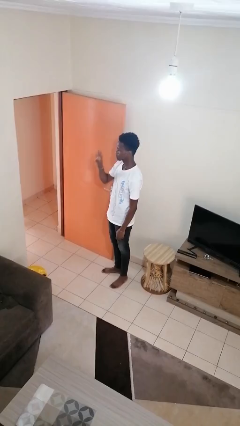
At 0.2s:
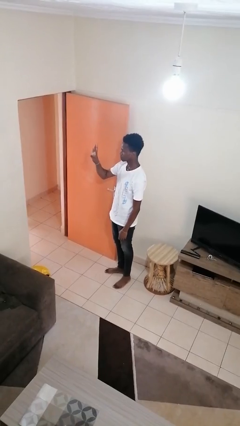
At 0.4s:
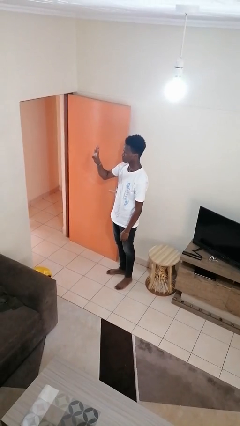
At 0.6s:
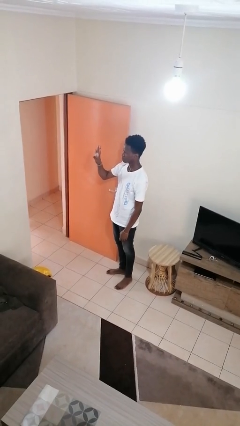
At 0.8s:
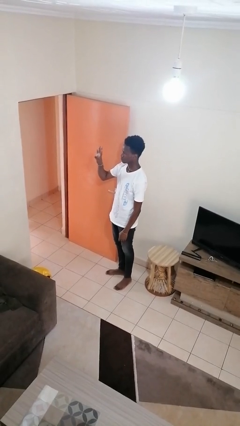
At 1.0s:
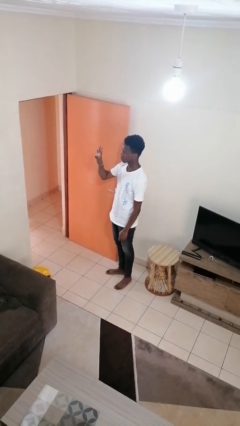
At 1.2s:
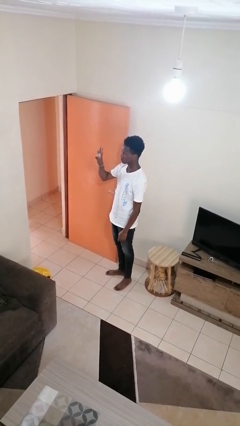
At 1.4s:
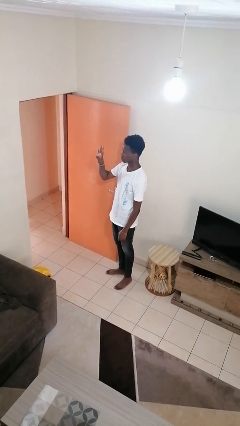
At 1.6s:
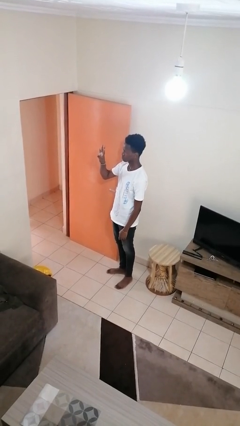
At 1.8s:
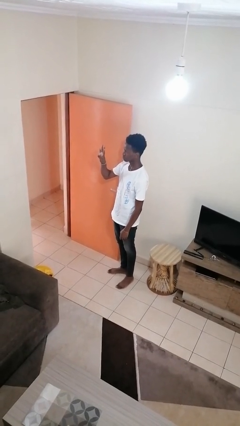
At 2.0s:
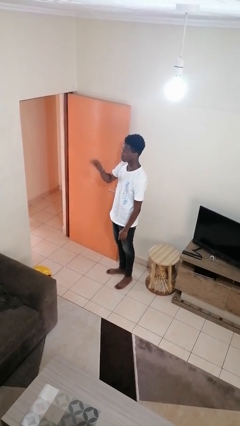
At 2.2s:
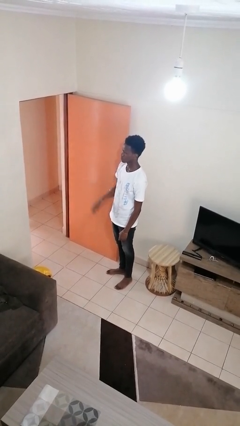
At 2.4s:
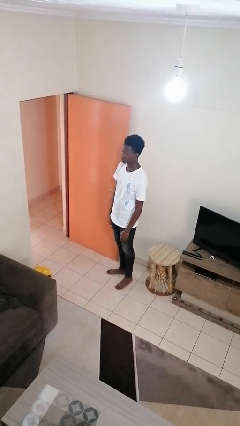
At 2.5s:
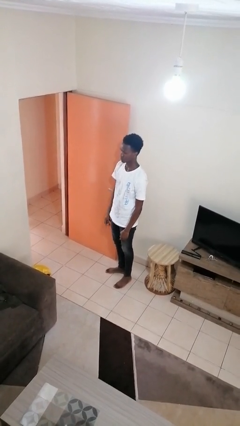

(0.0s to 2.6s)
person gestures number four

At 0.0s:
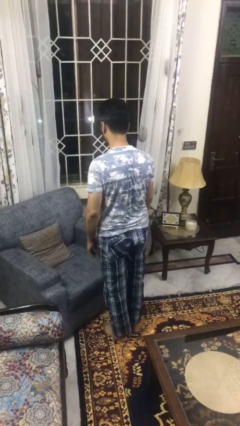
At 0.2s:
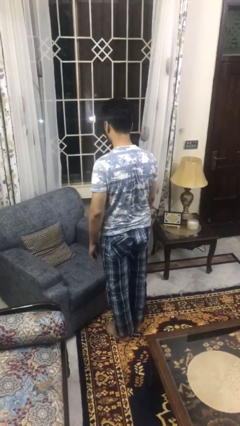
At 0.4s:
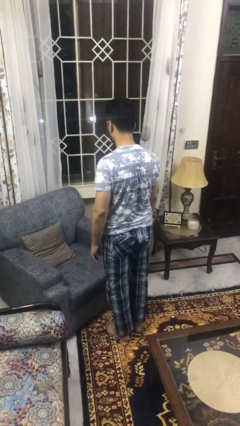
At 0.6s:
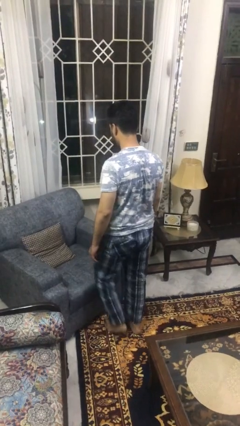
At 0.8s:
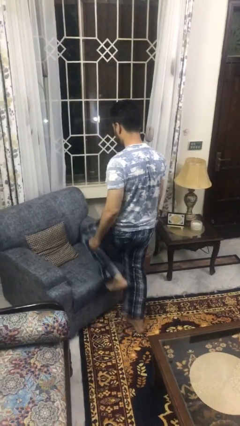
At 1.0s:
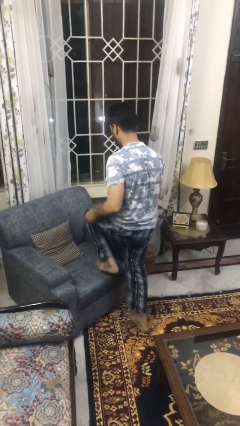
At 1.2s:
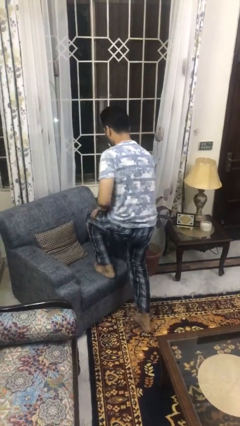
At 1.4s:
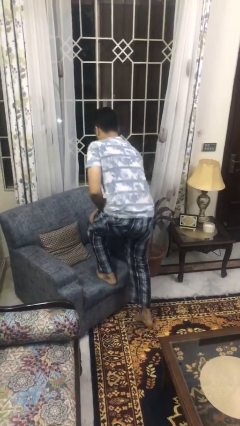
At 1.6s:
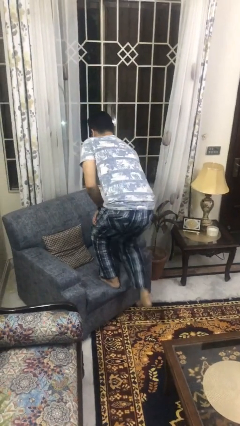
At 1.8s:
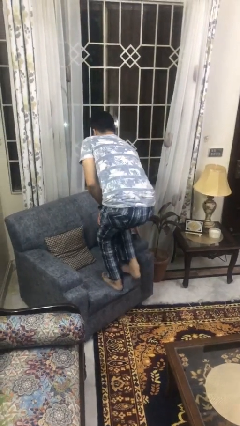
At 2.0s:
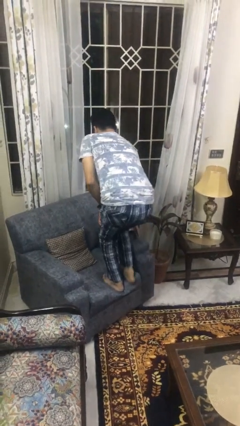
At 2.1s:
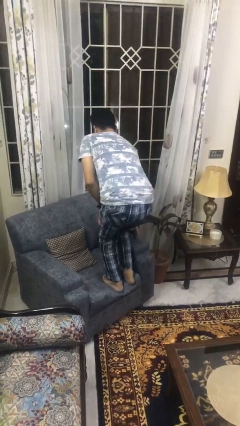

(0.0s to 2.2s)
person climbs on couch

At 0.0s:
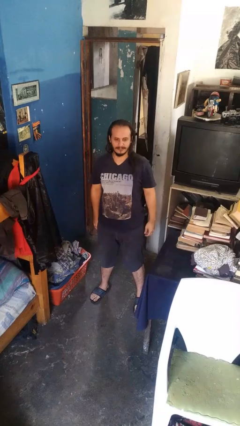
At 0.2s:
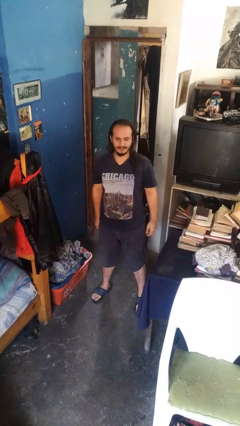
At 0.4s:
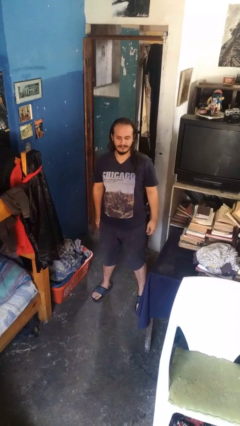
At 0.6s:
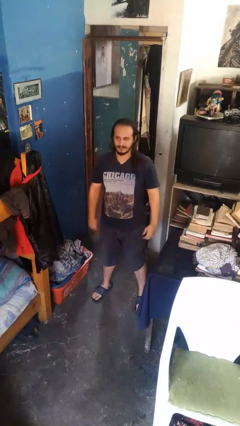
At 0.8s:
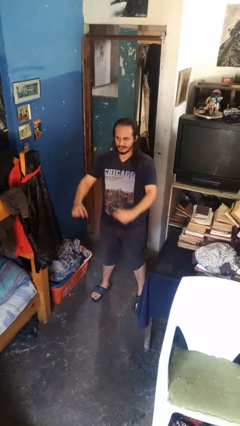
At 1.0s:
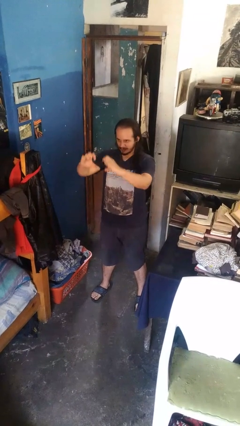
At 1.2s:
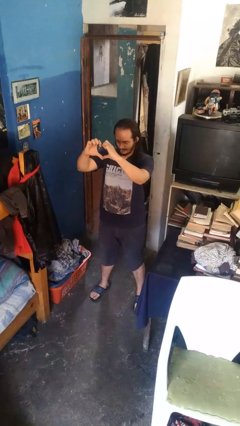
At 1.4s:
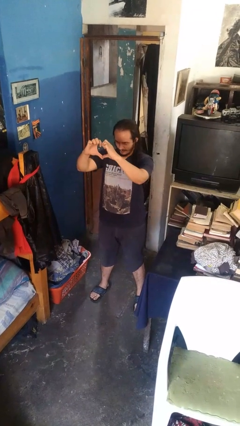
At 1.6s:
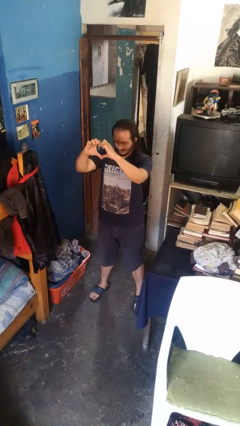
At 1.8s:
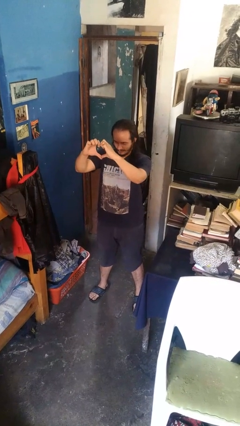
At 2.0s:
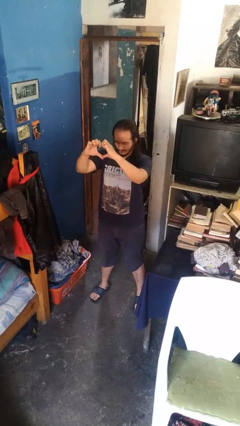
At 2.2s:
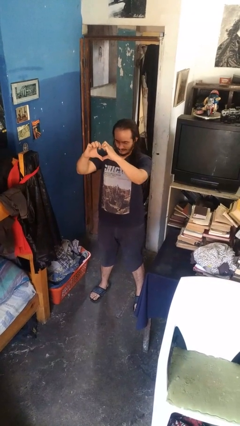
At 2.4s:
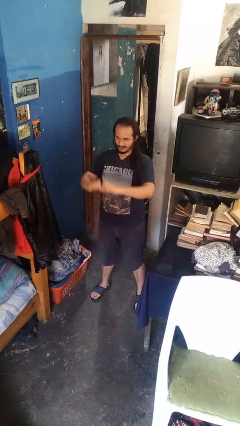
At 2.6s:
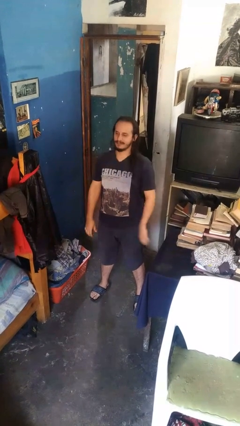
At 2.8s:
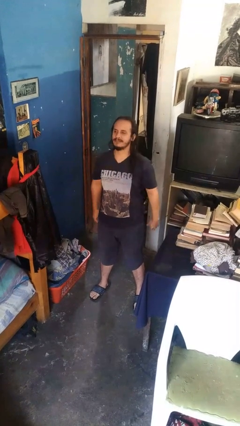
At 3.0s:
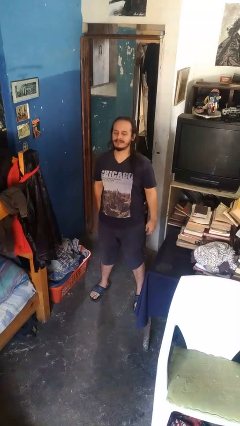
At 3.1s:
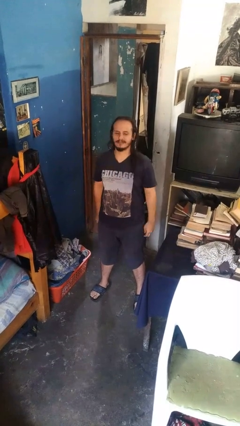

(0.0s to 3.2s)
person gestures heart

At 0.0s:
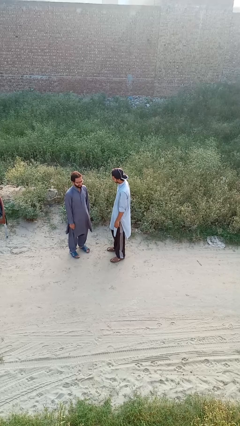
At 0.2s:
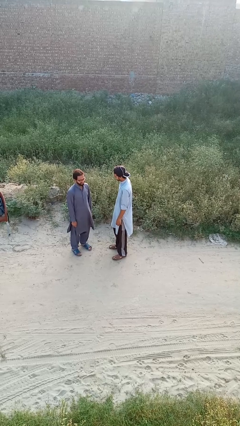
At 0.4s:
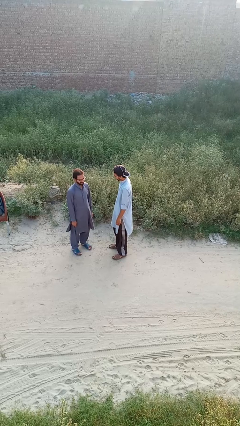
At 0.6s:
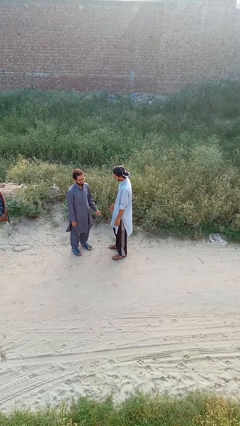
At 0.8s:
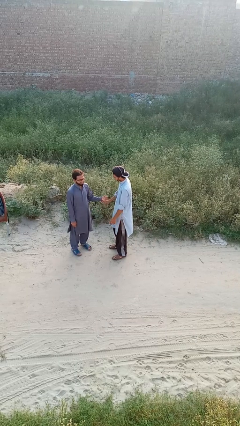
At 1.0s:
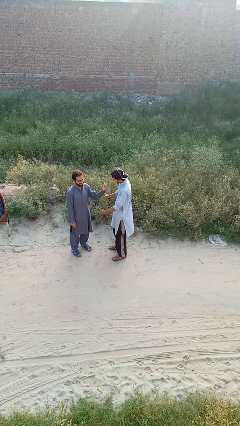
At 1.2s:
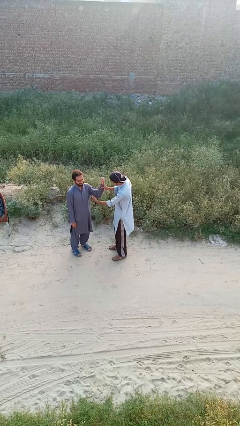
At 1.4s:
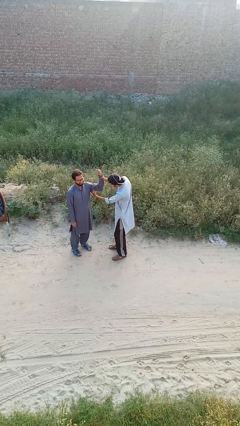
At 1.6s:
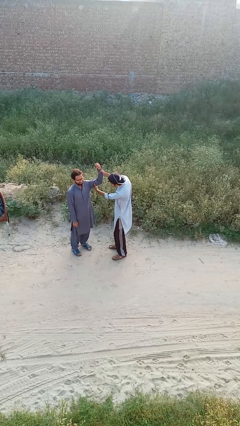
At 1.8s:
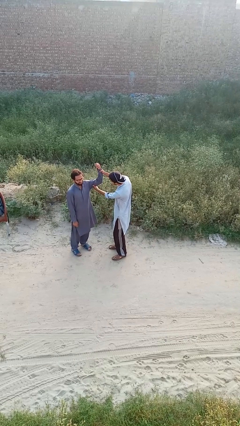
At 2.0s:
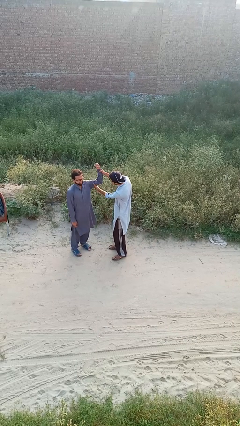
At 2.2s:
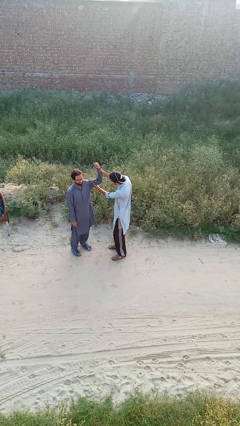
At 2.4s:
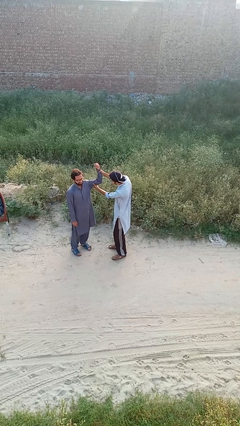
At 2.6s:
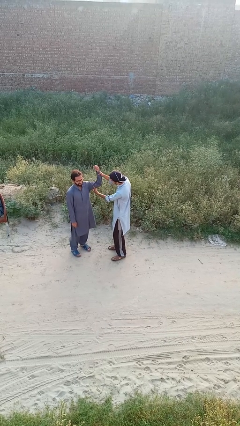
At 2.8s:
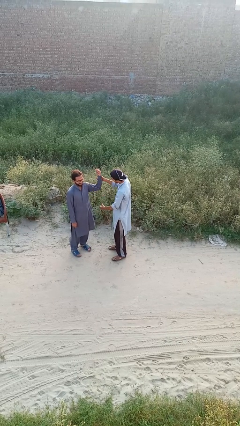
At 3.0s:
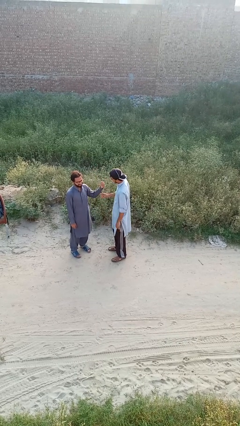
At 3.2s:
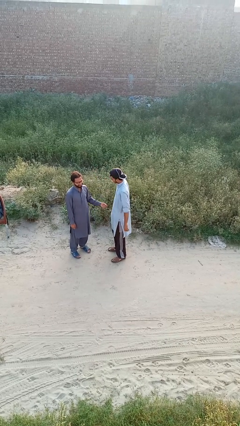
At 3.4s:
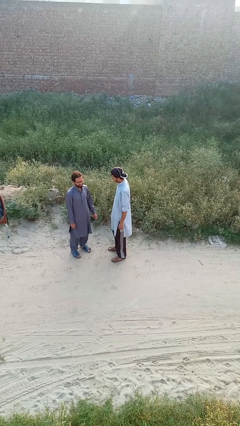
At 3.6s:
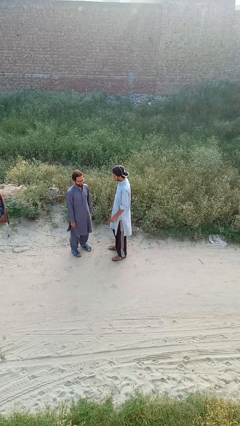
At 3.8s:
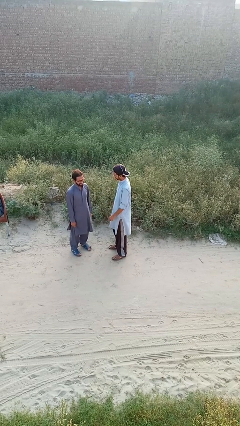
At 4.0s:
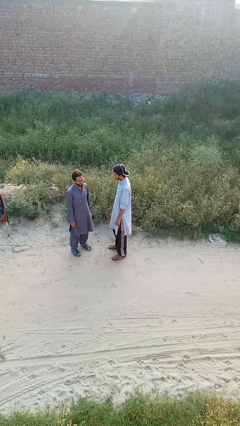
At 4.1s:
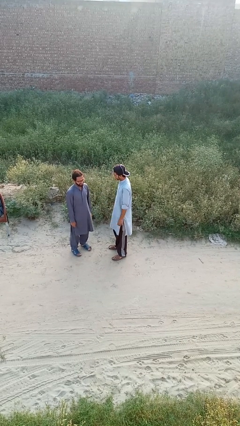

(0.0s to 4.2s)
person grabs person by bicep

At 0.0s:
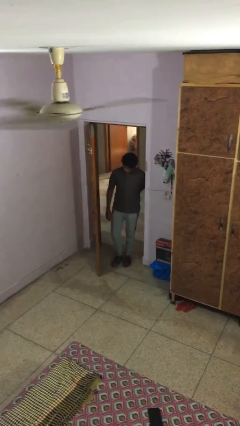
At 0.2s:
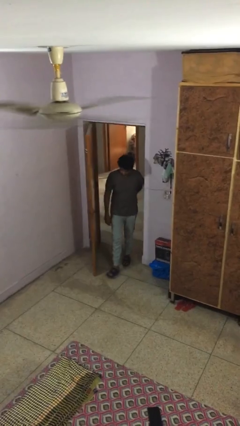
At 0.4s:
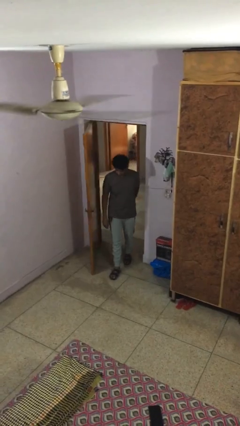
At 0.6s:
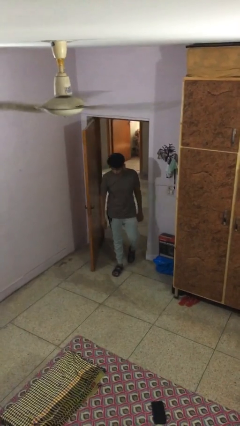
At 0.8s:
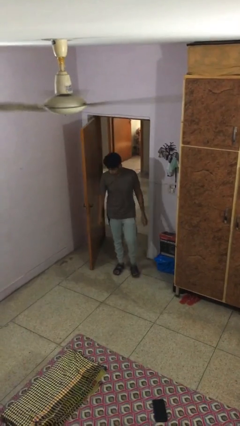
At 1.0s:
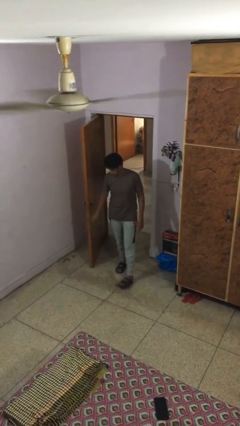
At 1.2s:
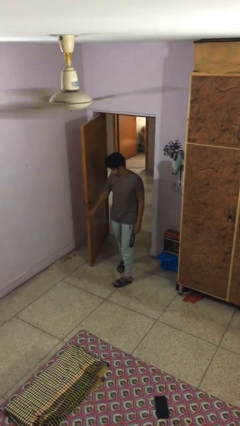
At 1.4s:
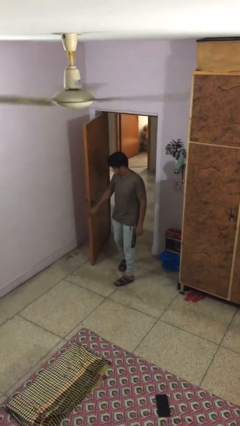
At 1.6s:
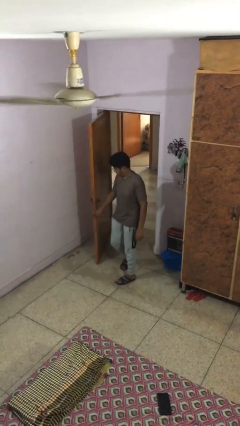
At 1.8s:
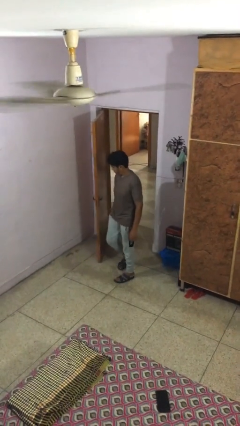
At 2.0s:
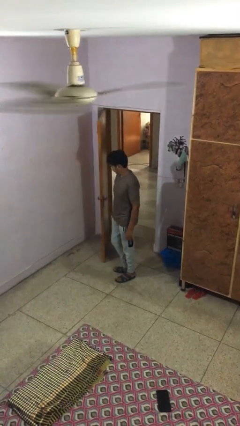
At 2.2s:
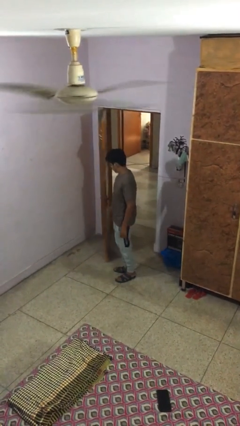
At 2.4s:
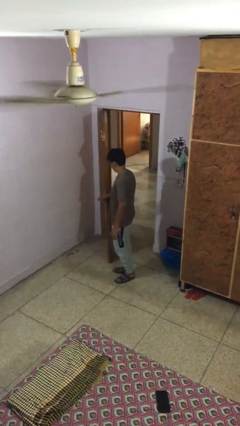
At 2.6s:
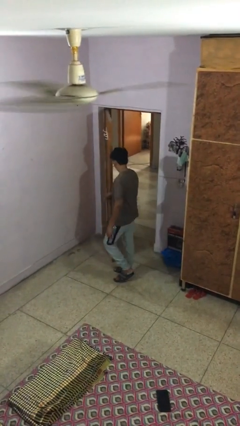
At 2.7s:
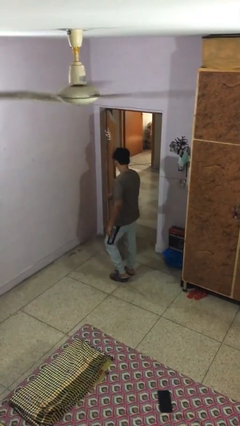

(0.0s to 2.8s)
person enters scene through structure

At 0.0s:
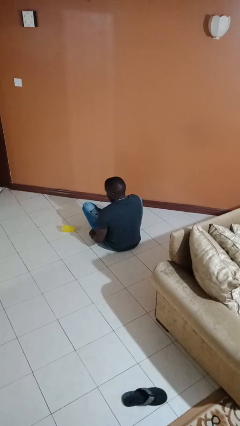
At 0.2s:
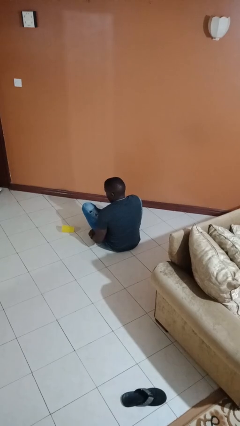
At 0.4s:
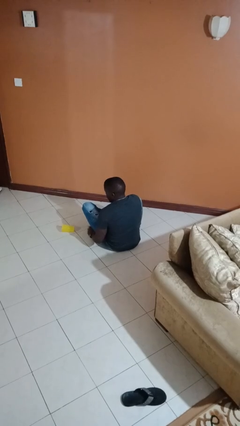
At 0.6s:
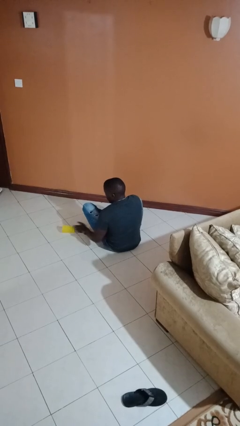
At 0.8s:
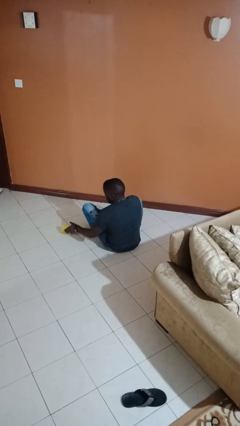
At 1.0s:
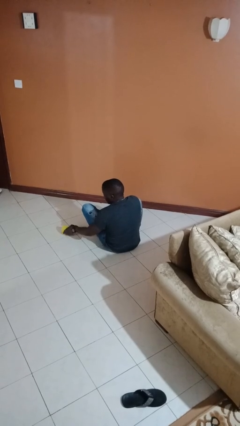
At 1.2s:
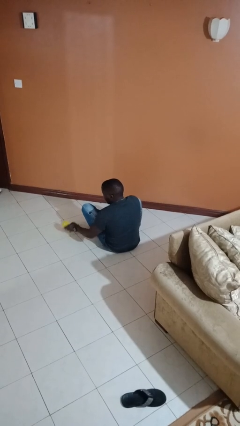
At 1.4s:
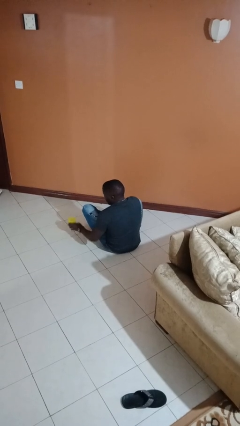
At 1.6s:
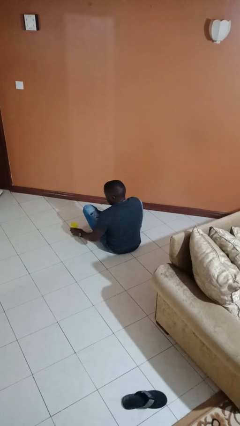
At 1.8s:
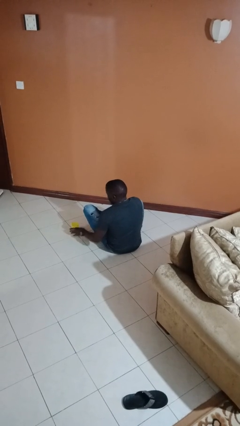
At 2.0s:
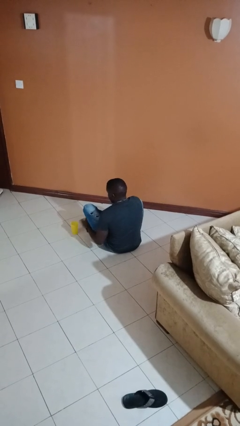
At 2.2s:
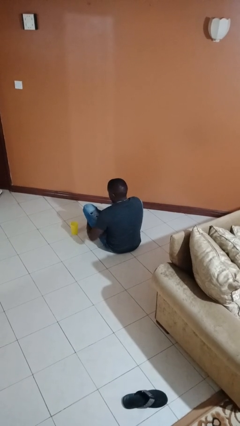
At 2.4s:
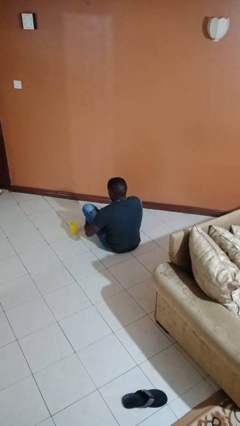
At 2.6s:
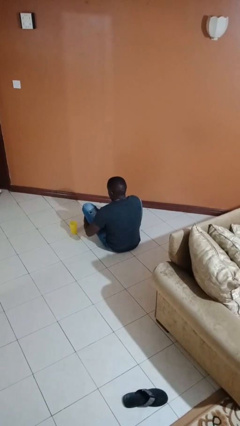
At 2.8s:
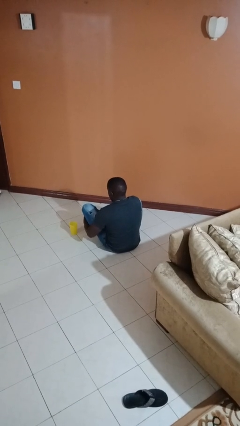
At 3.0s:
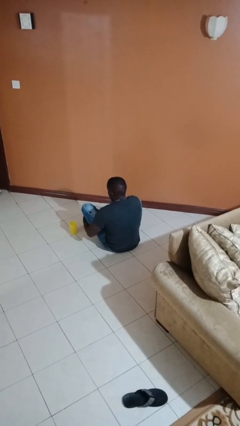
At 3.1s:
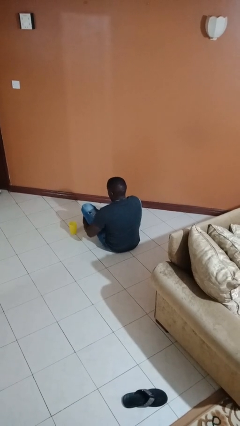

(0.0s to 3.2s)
person sets upright glass
